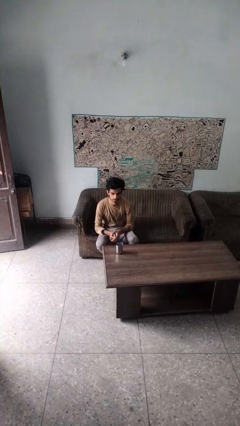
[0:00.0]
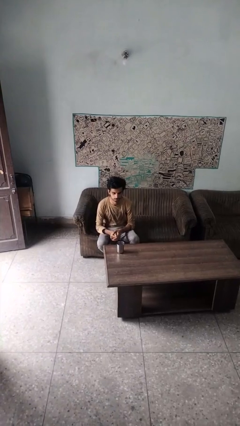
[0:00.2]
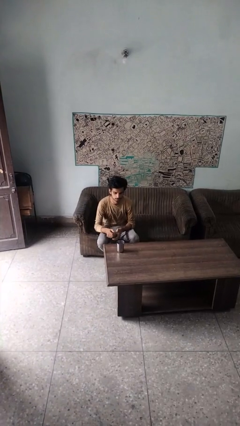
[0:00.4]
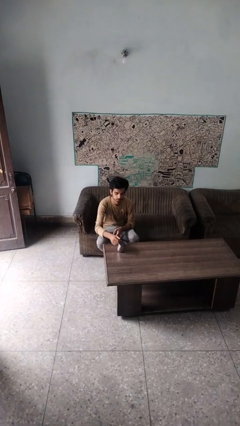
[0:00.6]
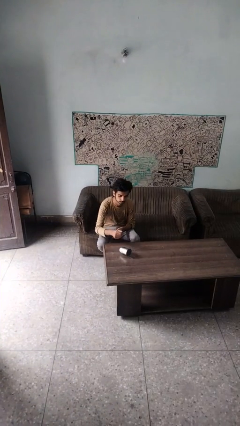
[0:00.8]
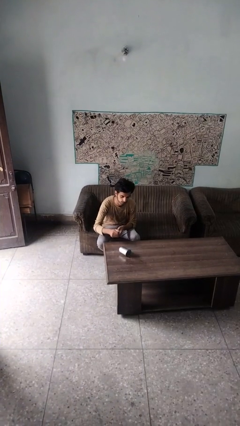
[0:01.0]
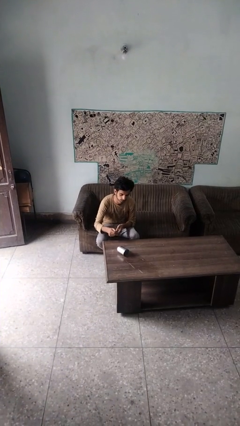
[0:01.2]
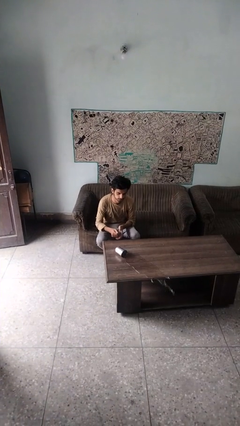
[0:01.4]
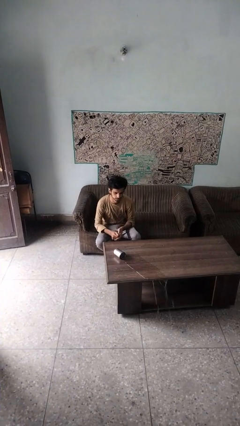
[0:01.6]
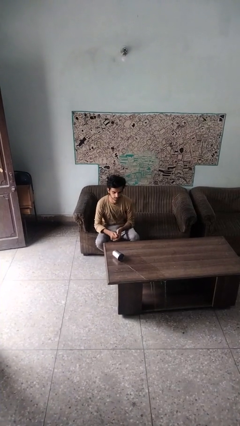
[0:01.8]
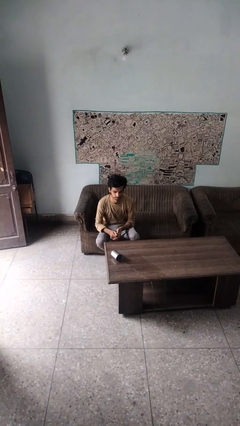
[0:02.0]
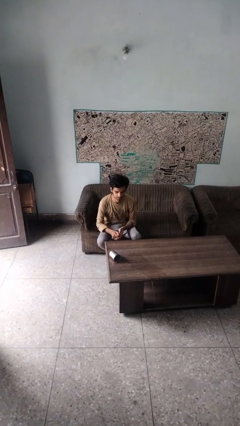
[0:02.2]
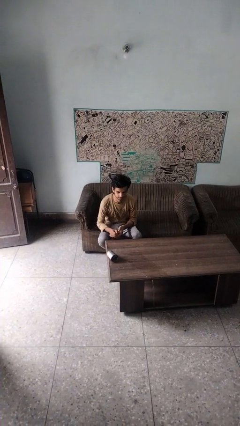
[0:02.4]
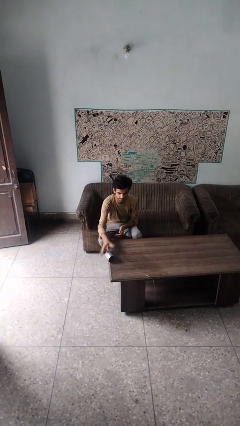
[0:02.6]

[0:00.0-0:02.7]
person spills on table

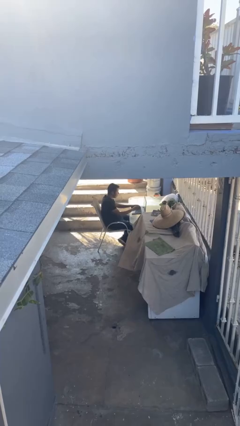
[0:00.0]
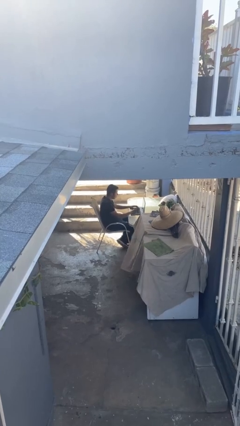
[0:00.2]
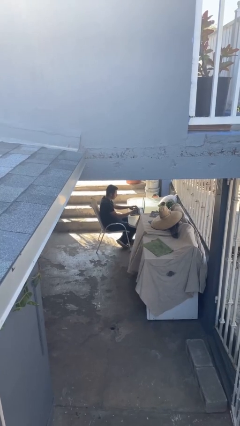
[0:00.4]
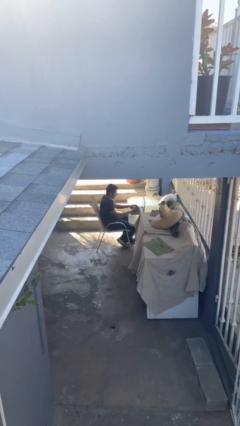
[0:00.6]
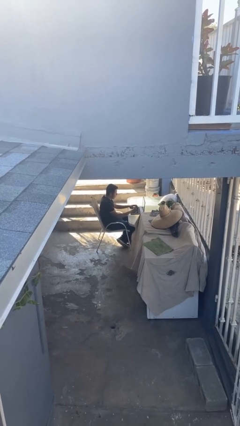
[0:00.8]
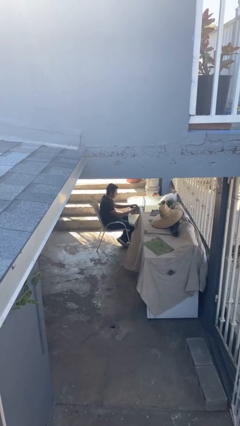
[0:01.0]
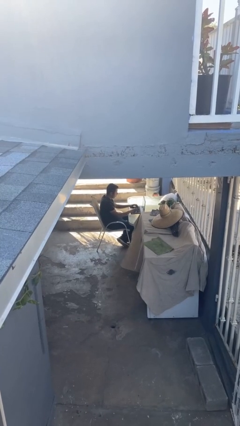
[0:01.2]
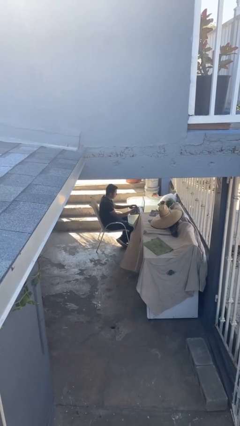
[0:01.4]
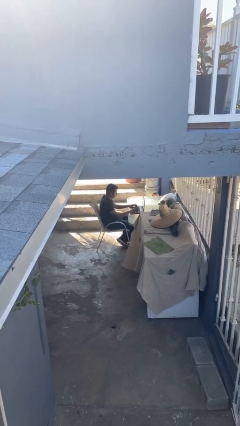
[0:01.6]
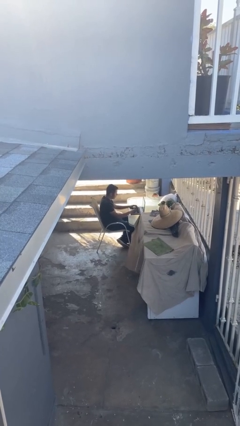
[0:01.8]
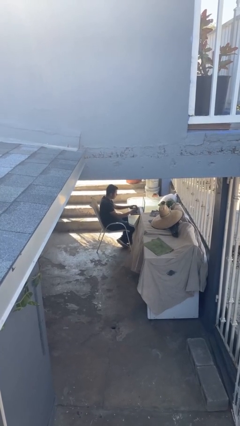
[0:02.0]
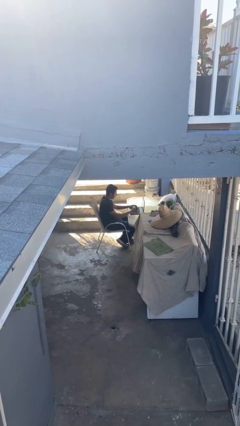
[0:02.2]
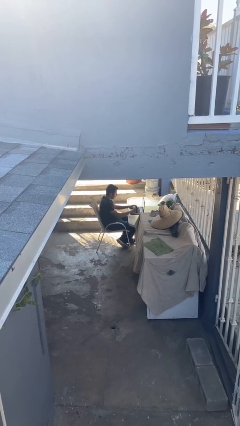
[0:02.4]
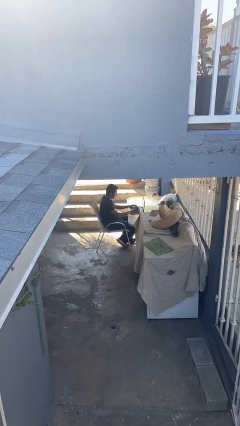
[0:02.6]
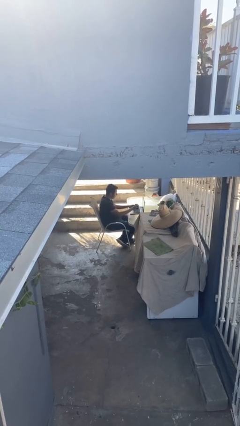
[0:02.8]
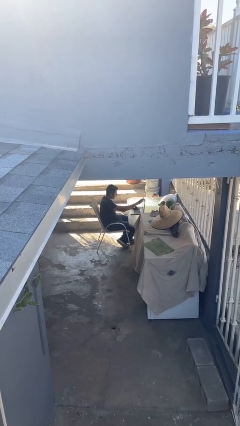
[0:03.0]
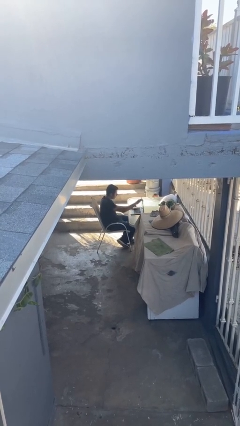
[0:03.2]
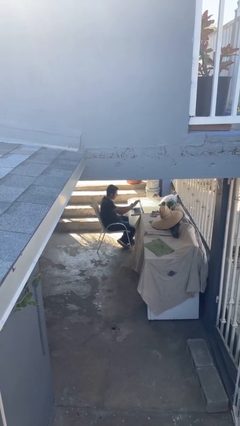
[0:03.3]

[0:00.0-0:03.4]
person interacts with laptop

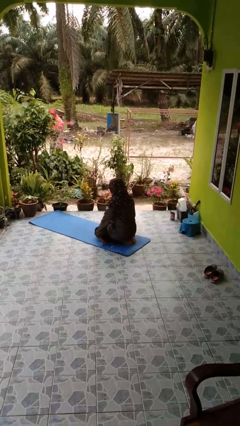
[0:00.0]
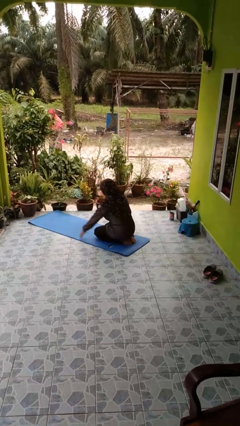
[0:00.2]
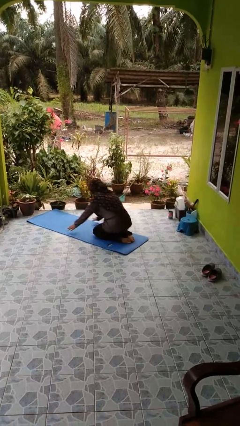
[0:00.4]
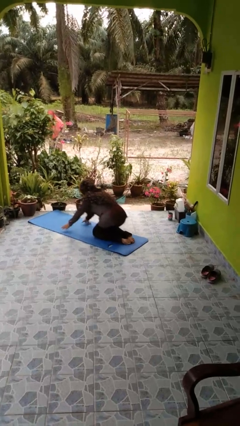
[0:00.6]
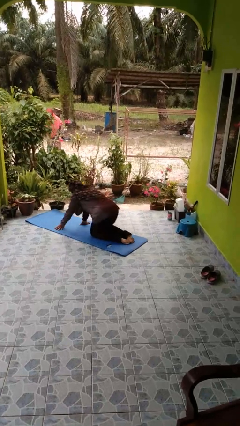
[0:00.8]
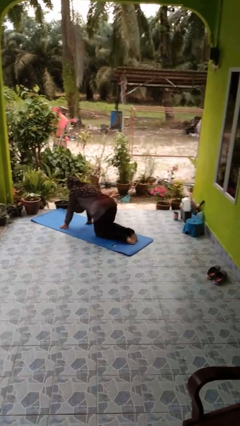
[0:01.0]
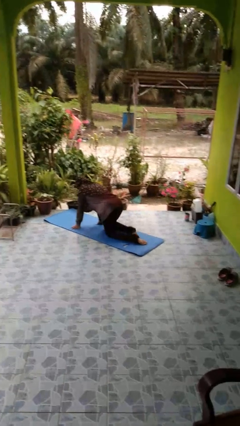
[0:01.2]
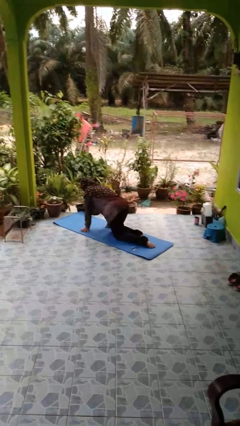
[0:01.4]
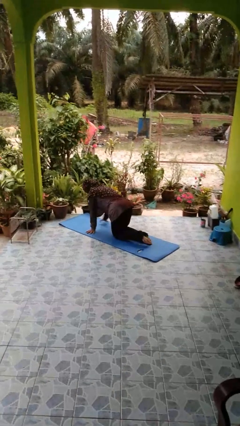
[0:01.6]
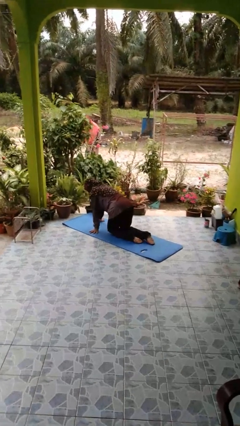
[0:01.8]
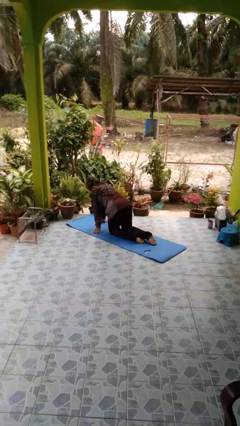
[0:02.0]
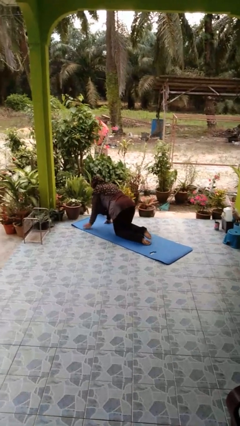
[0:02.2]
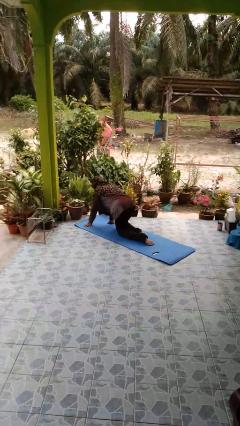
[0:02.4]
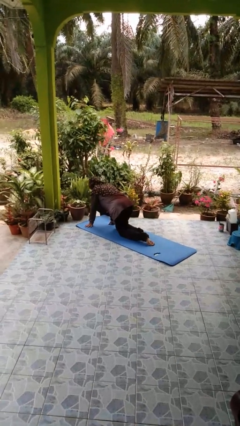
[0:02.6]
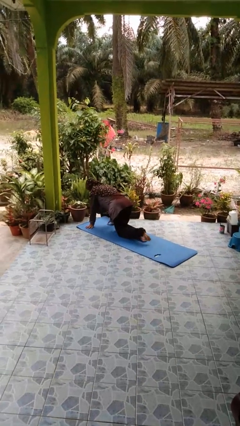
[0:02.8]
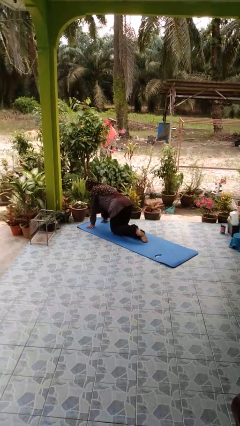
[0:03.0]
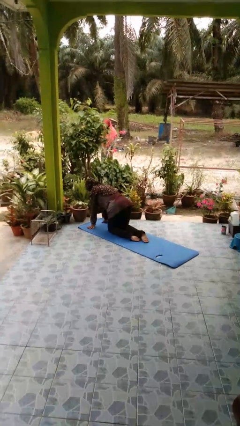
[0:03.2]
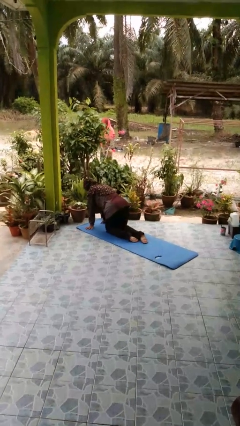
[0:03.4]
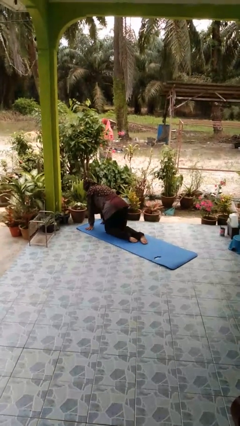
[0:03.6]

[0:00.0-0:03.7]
person crawls

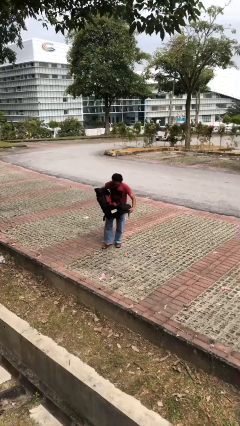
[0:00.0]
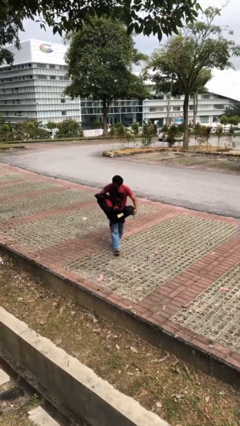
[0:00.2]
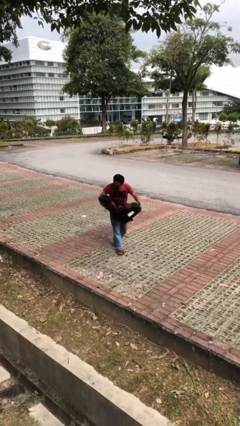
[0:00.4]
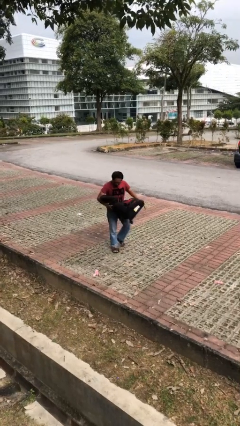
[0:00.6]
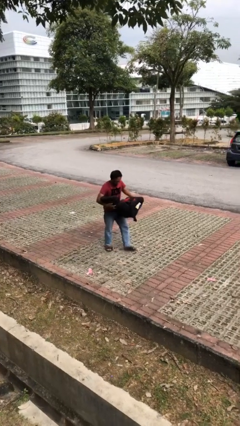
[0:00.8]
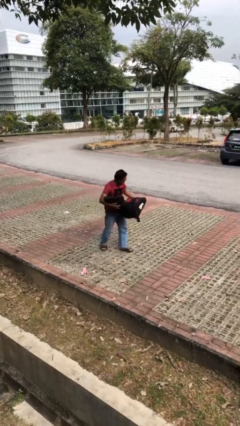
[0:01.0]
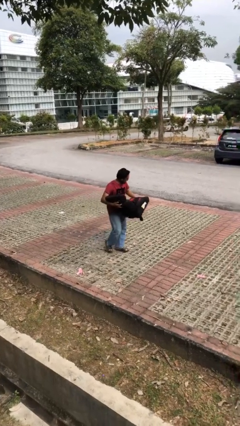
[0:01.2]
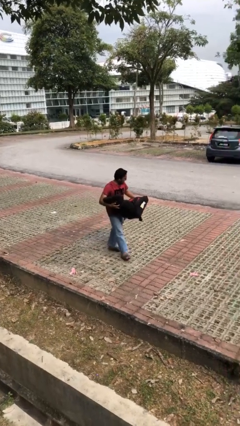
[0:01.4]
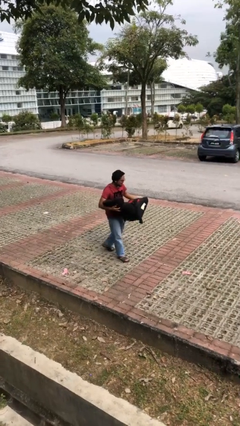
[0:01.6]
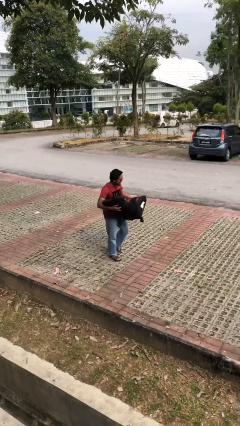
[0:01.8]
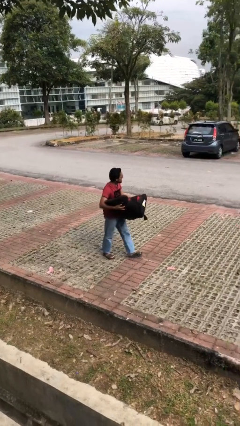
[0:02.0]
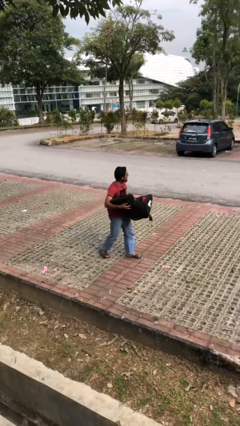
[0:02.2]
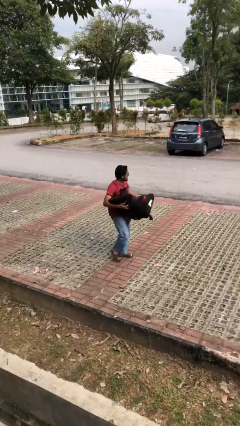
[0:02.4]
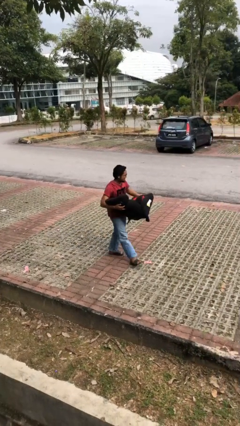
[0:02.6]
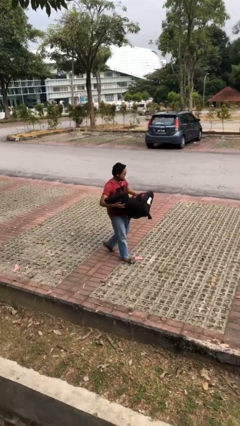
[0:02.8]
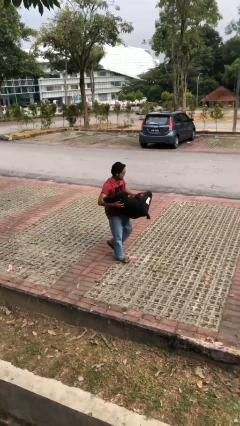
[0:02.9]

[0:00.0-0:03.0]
person carries heavy object

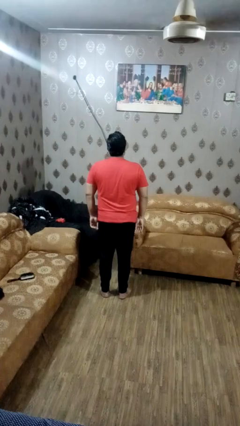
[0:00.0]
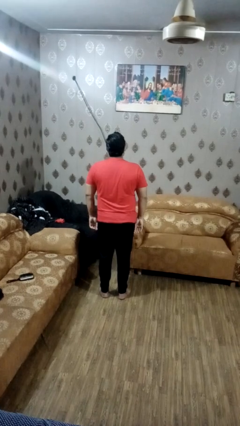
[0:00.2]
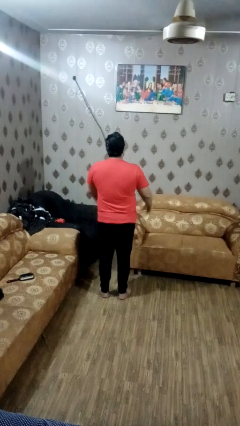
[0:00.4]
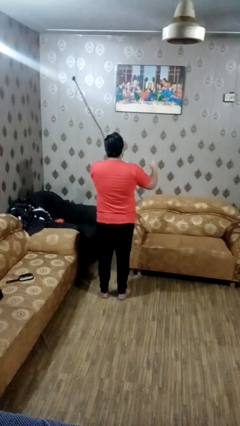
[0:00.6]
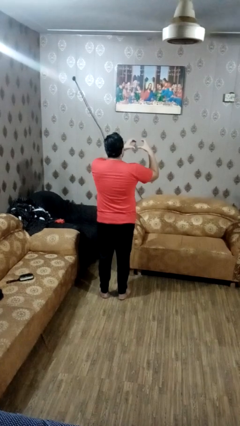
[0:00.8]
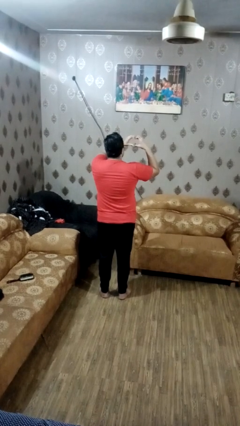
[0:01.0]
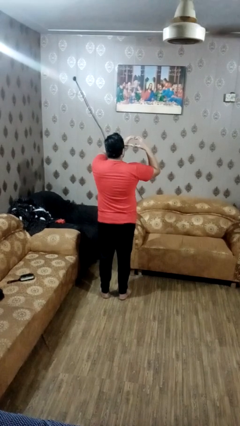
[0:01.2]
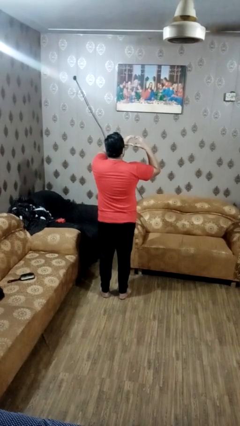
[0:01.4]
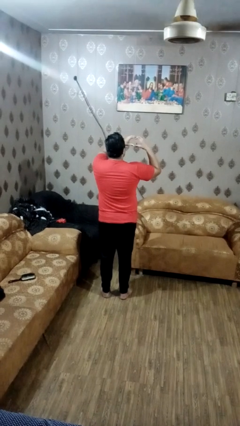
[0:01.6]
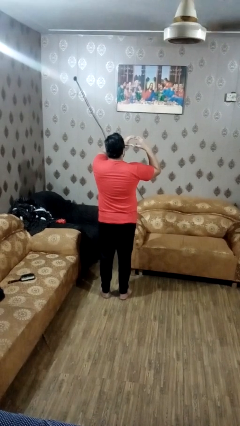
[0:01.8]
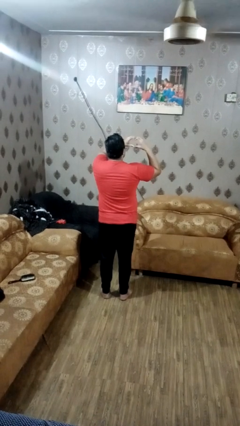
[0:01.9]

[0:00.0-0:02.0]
person gestures heart

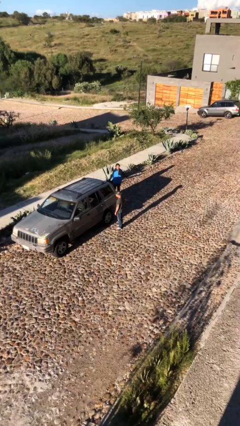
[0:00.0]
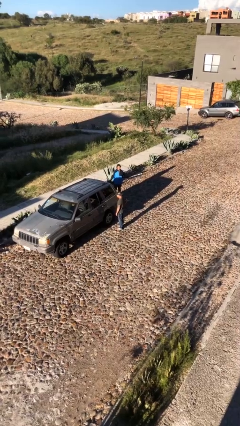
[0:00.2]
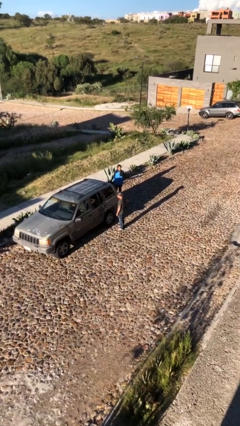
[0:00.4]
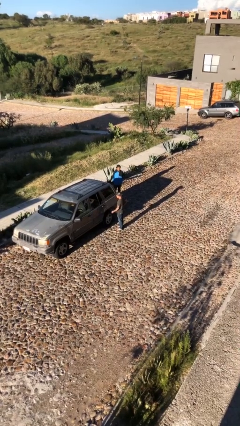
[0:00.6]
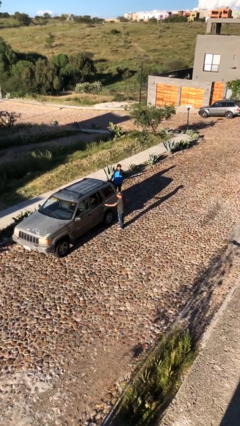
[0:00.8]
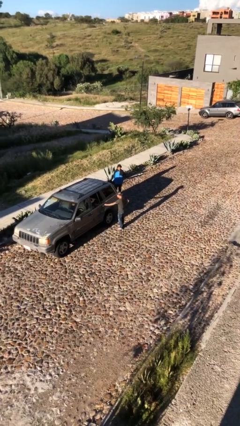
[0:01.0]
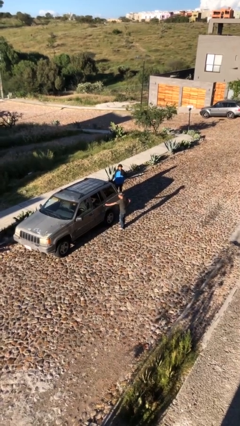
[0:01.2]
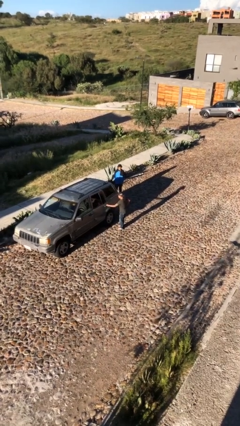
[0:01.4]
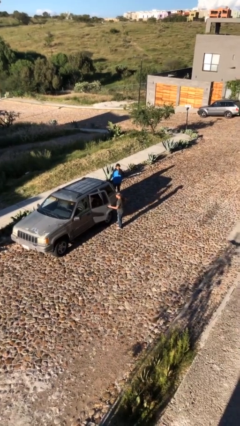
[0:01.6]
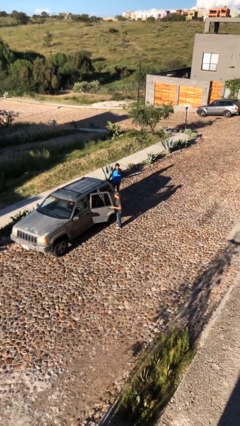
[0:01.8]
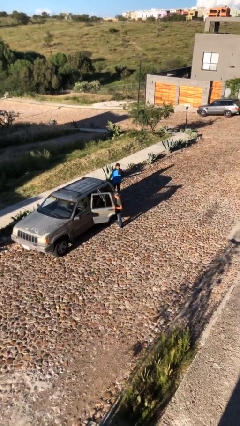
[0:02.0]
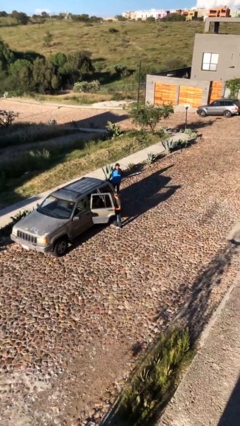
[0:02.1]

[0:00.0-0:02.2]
person opens car door

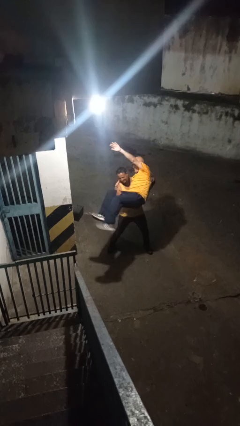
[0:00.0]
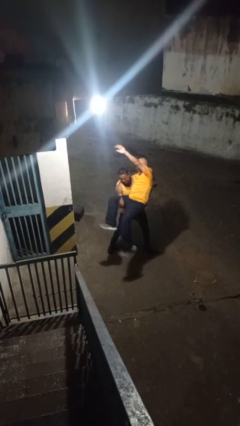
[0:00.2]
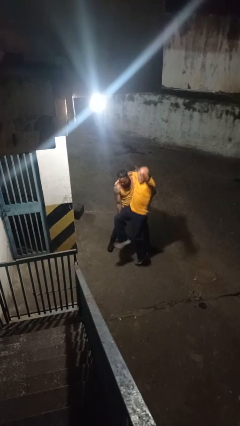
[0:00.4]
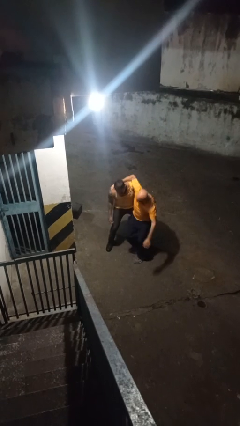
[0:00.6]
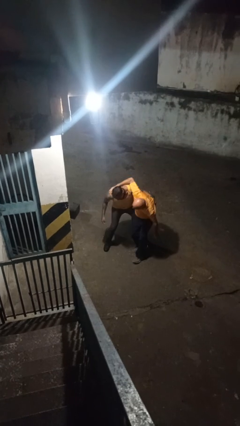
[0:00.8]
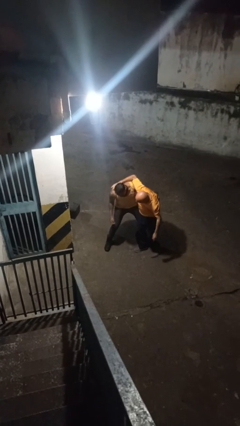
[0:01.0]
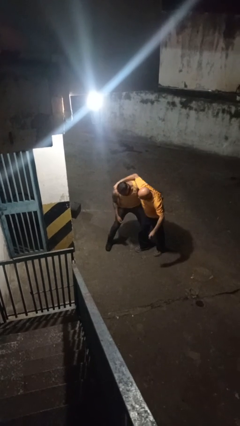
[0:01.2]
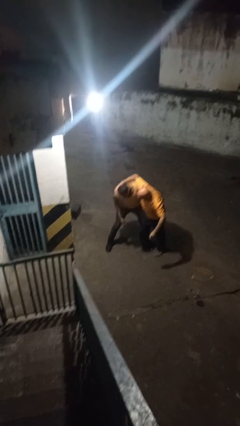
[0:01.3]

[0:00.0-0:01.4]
person puts down person
